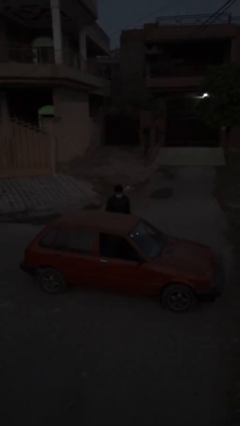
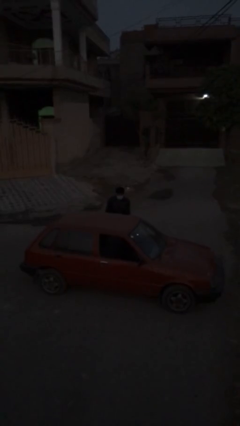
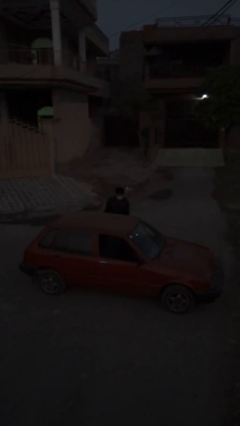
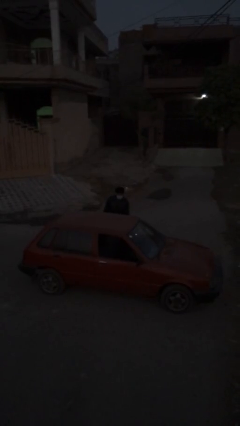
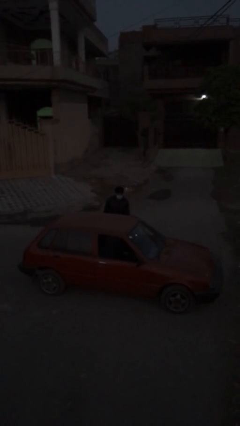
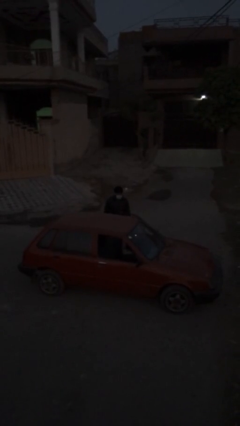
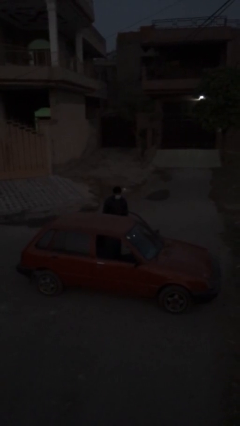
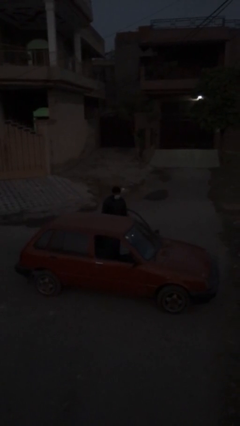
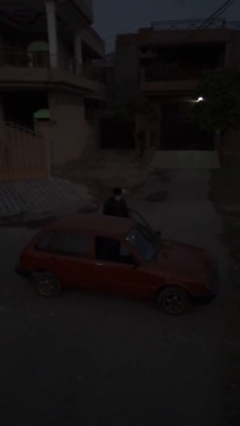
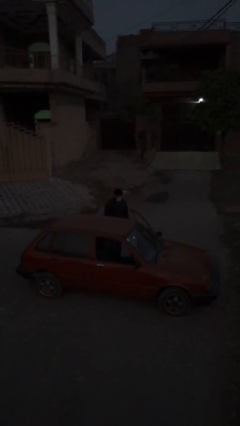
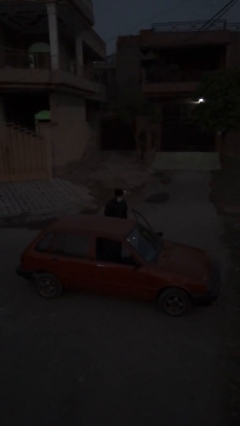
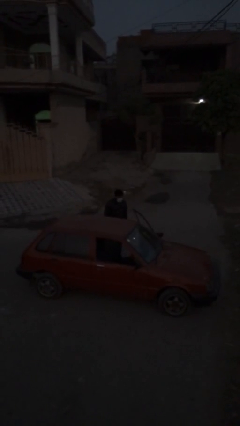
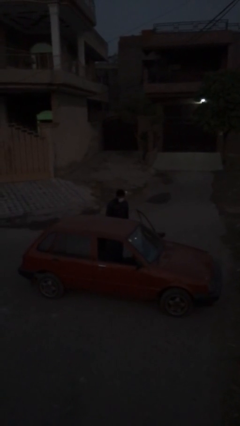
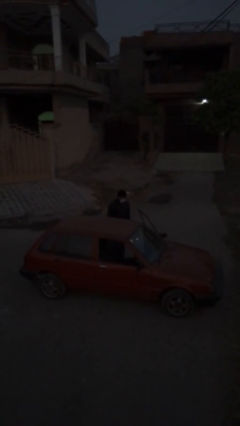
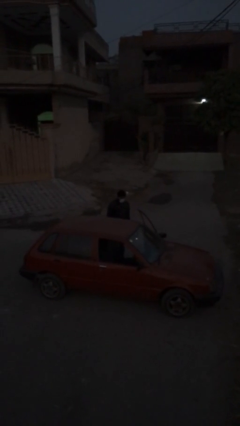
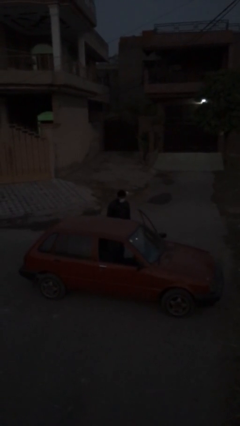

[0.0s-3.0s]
person opens car door

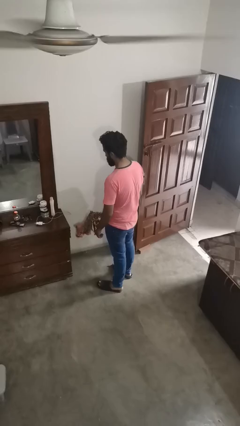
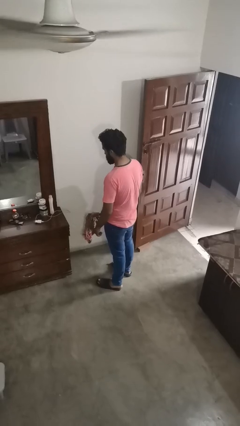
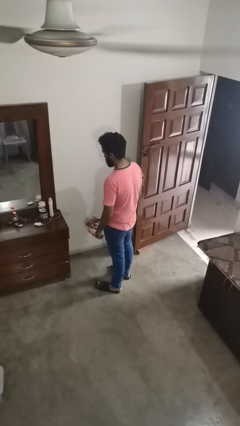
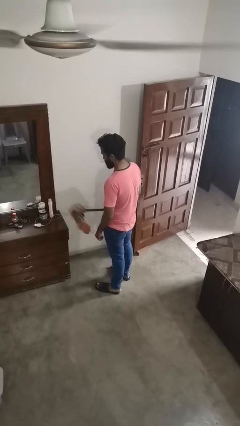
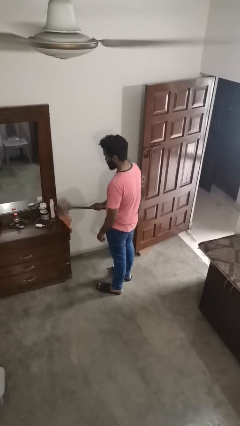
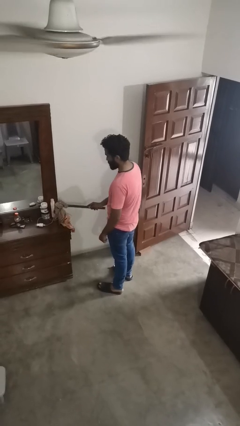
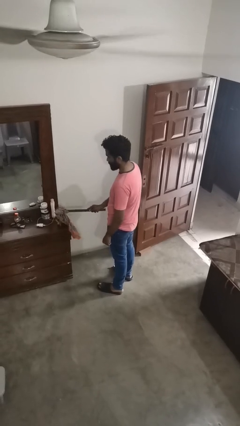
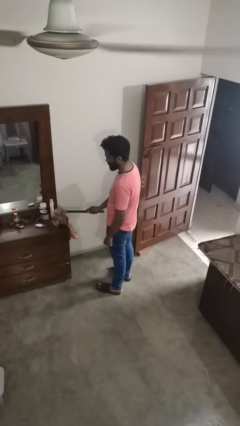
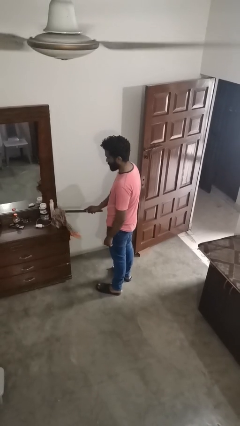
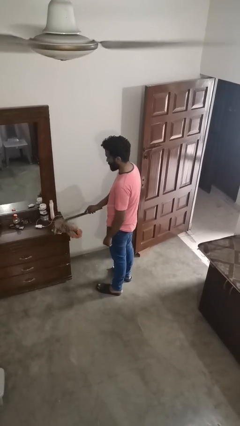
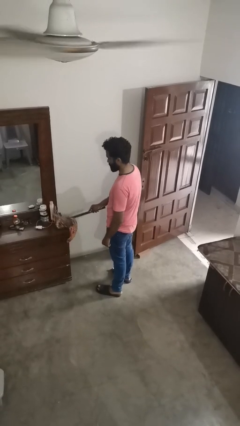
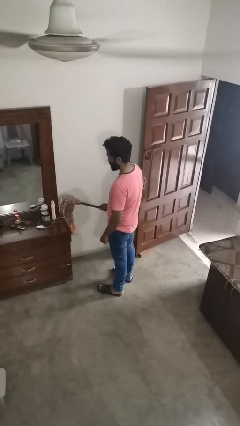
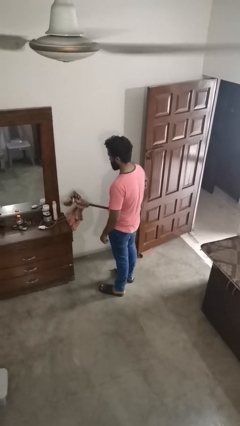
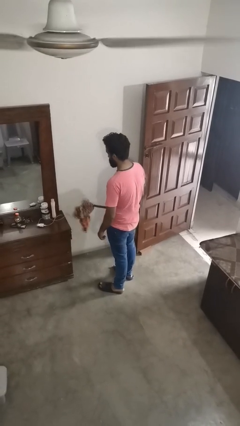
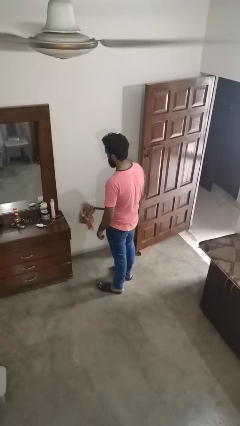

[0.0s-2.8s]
person dusts furniture

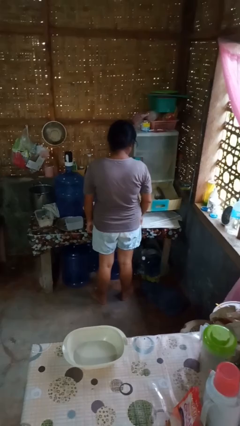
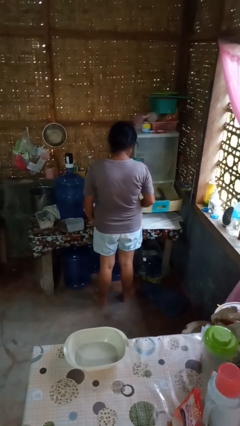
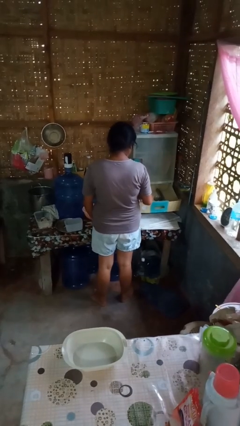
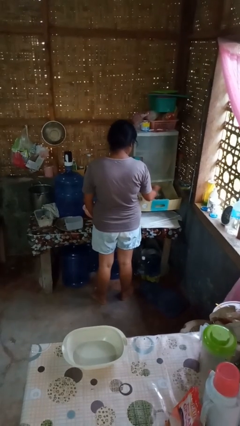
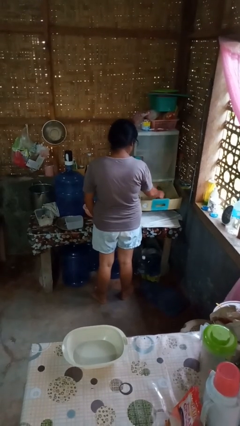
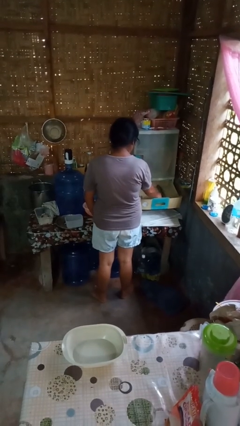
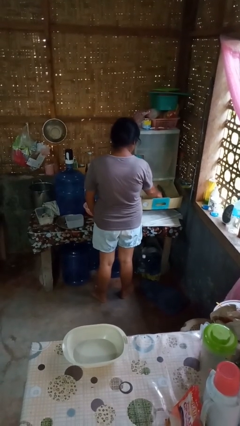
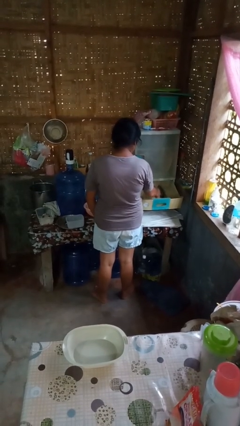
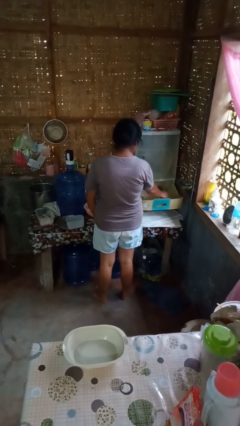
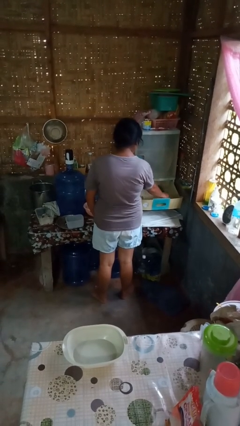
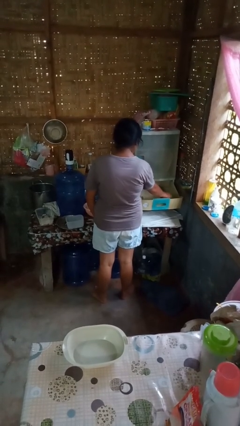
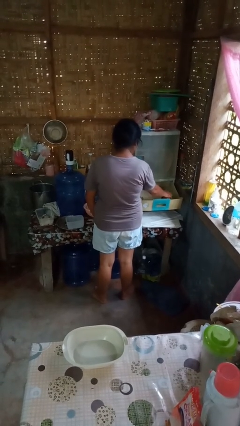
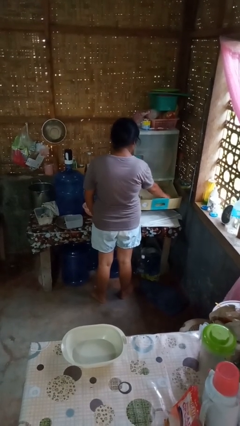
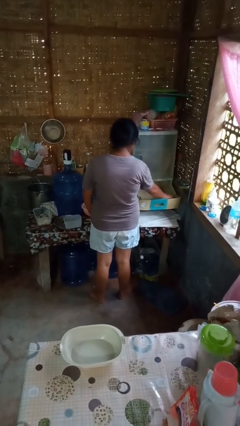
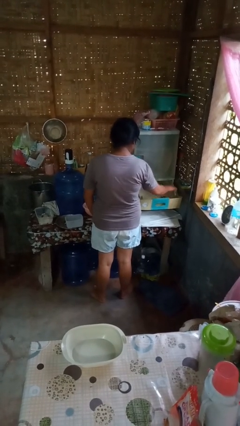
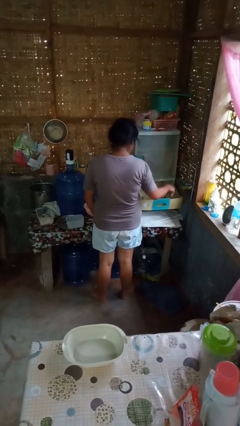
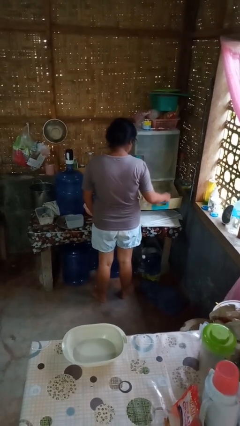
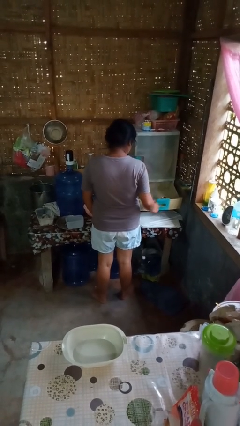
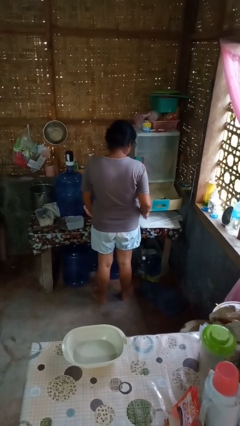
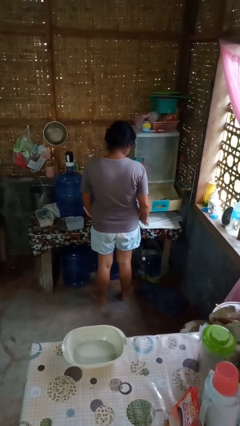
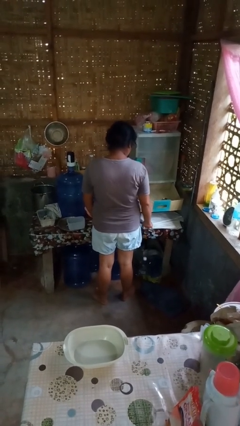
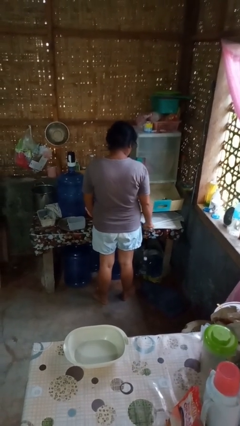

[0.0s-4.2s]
person takes object from kitchen drawer

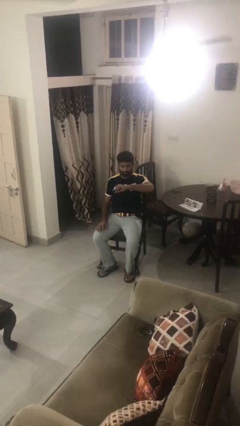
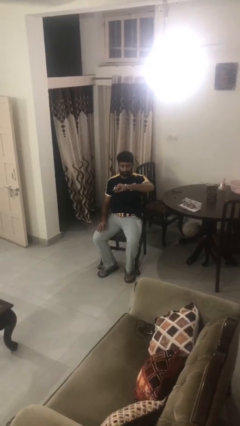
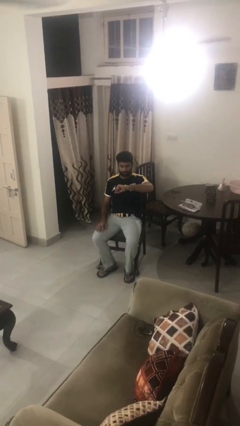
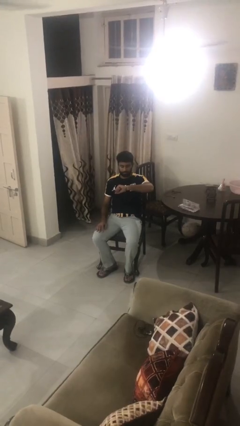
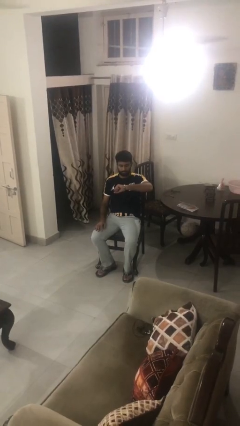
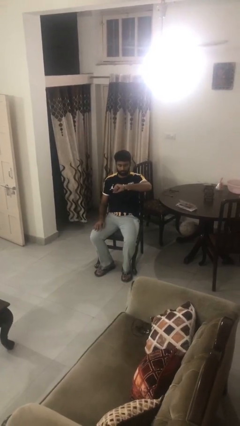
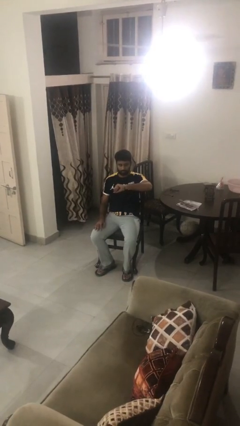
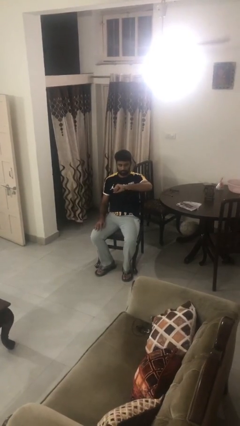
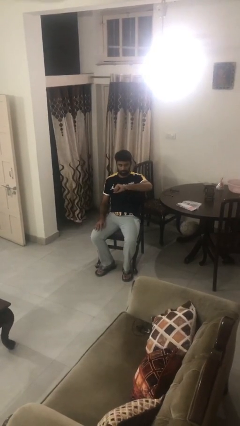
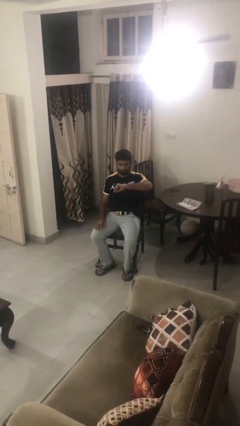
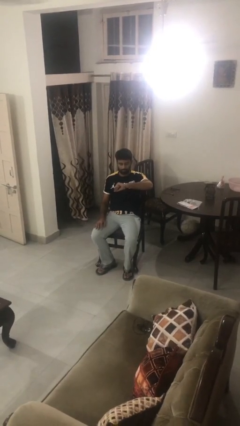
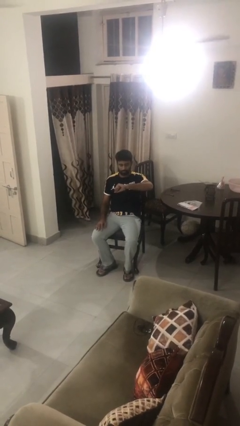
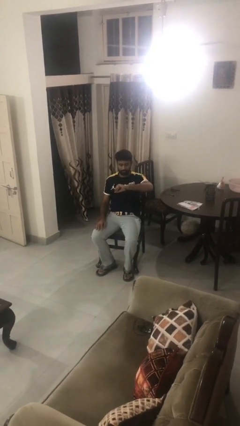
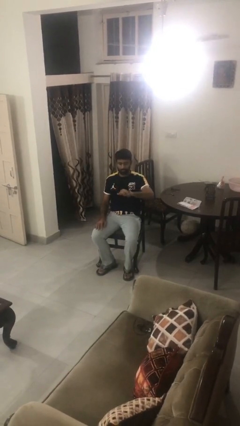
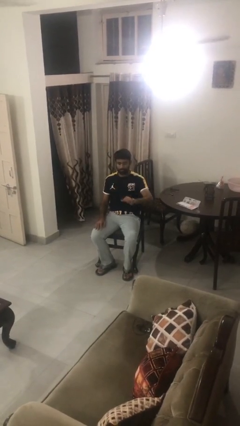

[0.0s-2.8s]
person looks at wristwatch

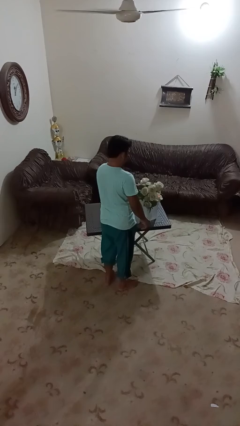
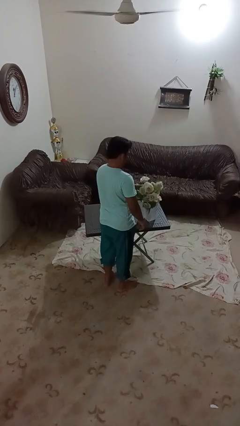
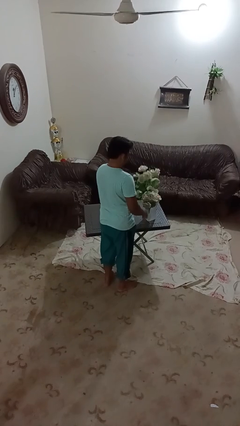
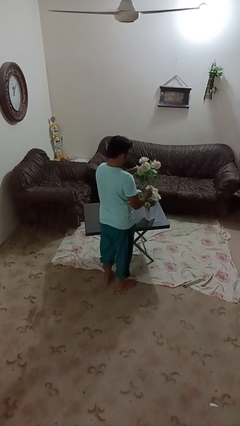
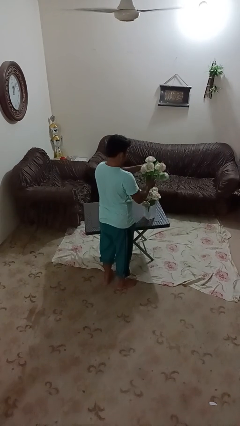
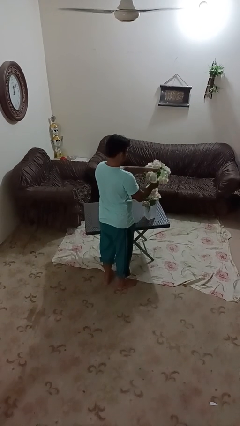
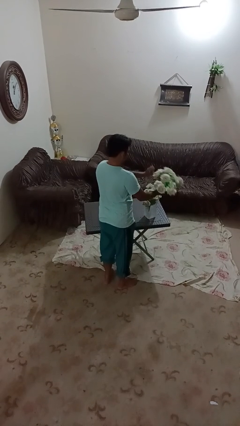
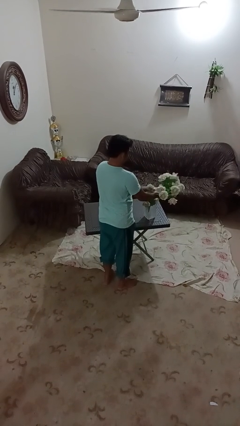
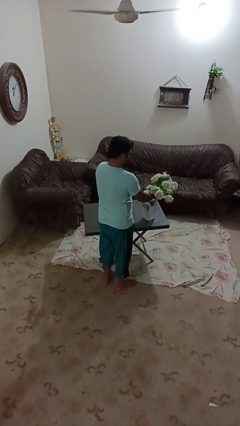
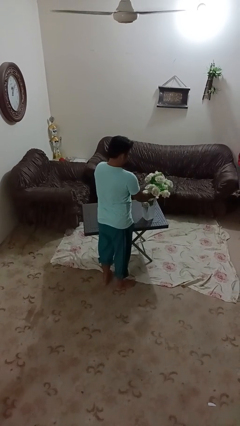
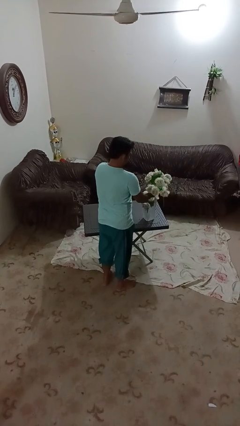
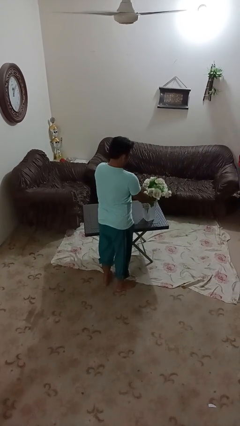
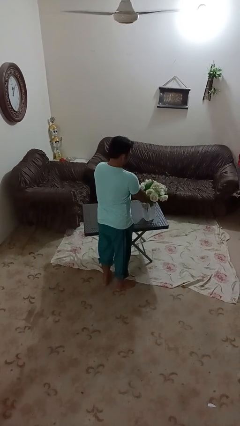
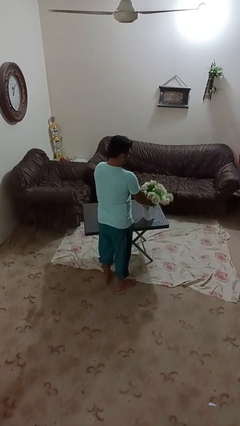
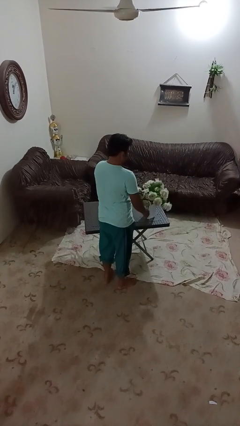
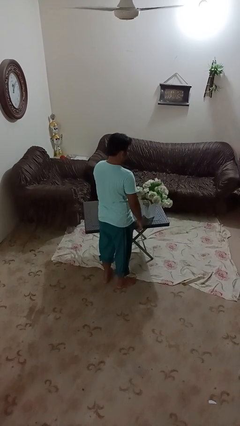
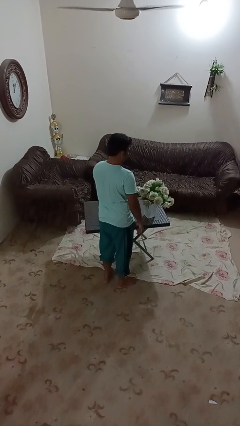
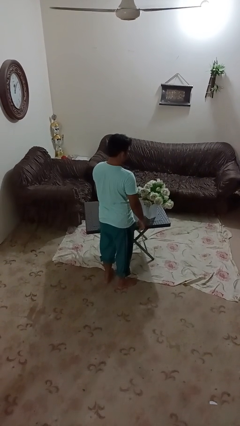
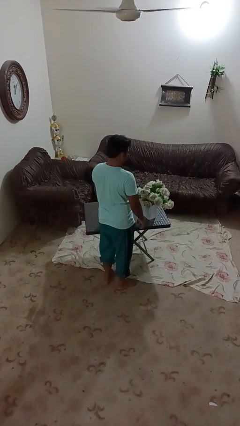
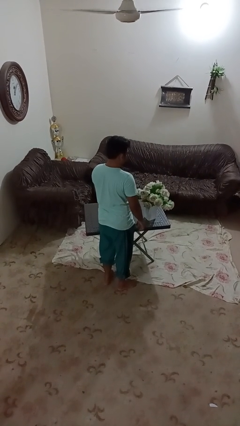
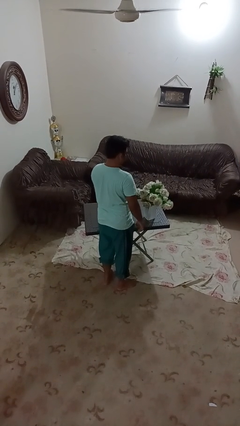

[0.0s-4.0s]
person arranges flowers in vase
